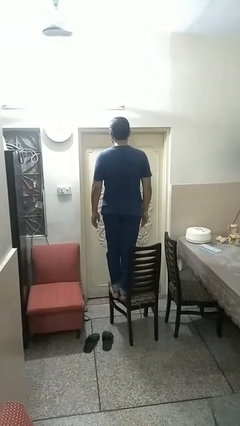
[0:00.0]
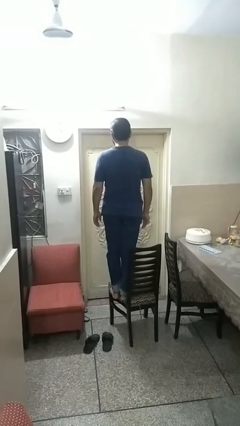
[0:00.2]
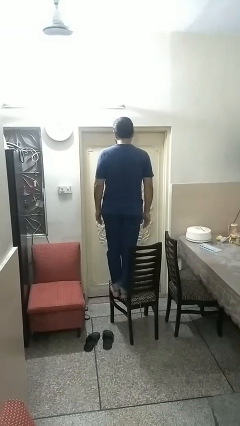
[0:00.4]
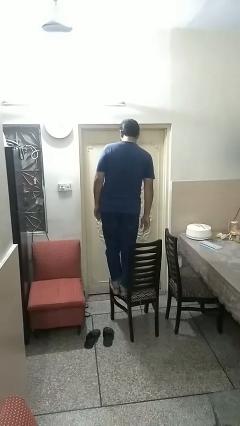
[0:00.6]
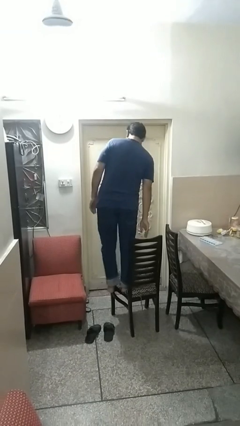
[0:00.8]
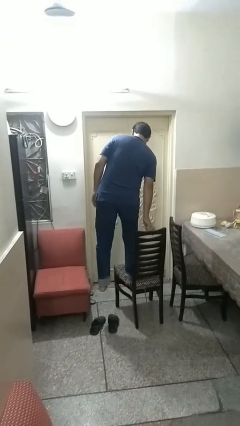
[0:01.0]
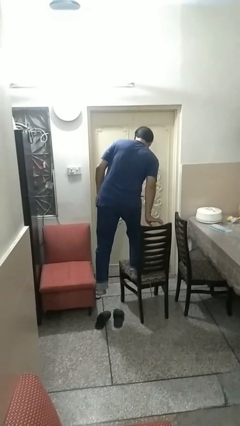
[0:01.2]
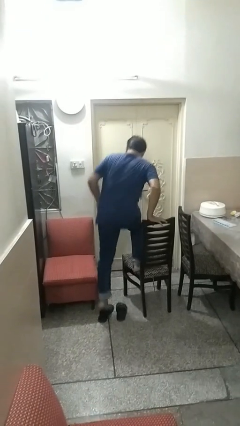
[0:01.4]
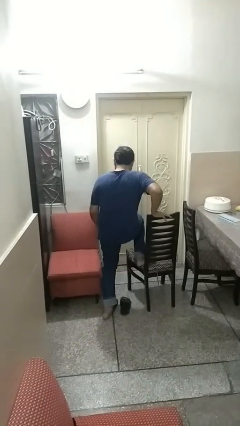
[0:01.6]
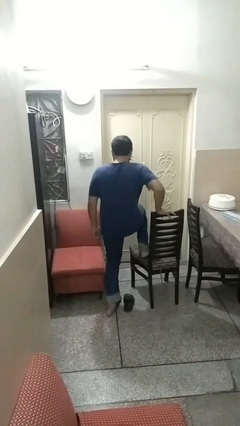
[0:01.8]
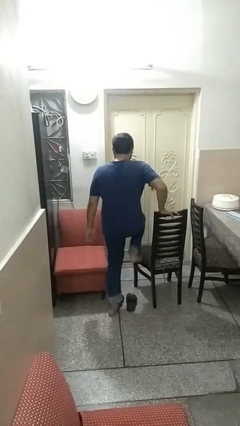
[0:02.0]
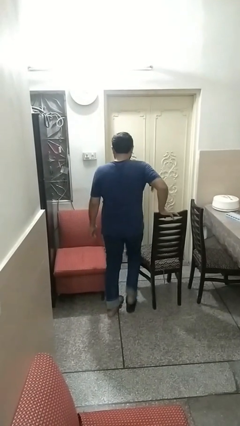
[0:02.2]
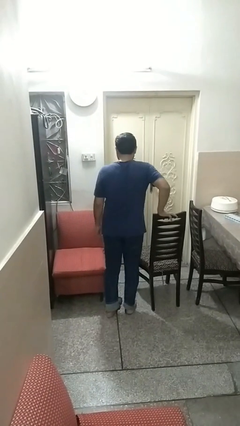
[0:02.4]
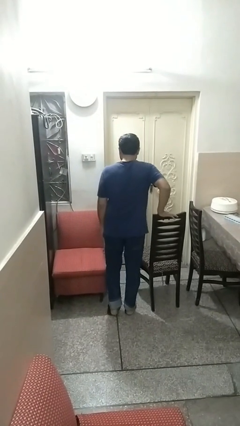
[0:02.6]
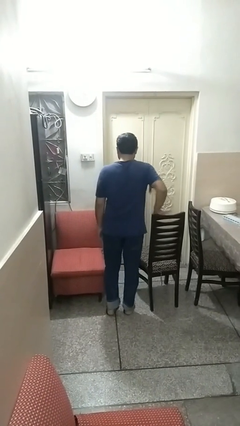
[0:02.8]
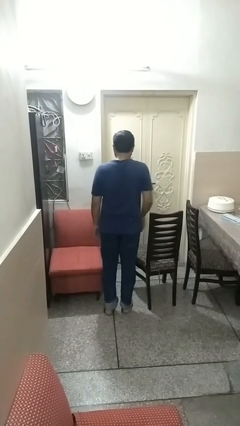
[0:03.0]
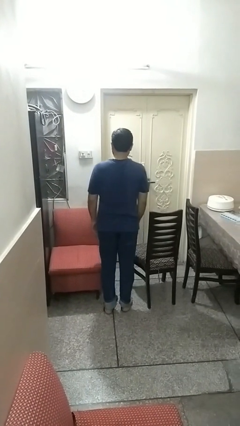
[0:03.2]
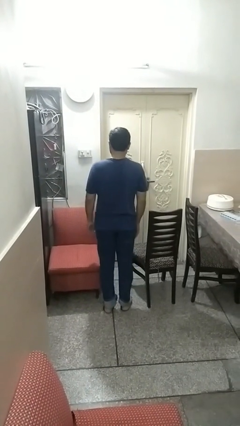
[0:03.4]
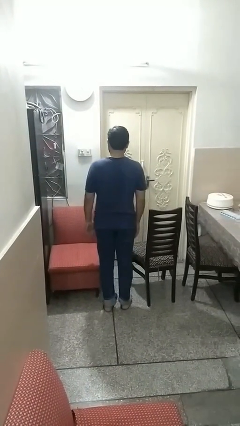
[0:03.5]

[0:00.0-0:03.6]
person climbs off chair

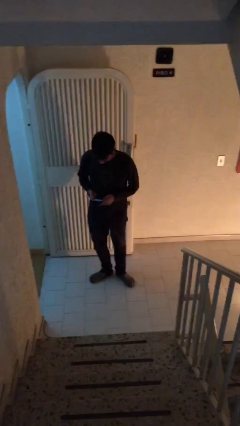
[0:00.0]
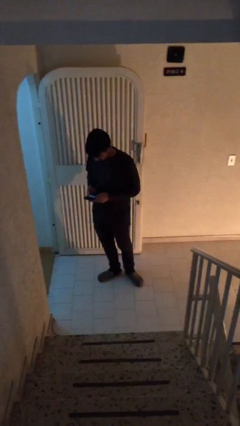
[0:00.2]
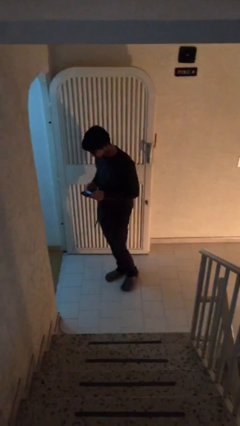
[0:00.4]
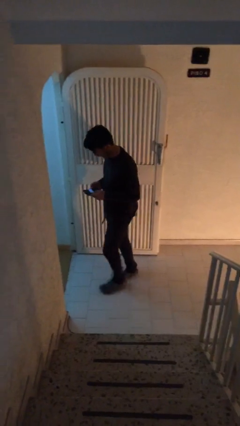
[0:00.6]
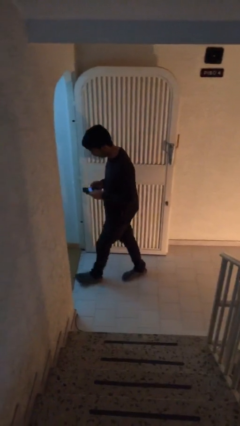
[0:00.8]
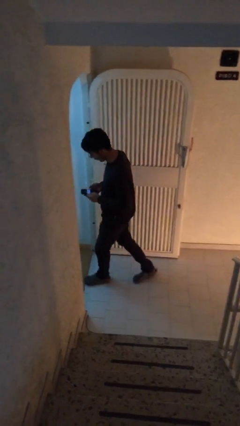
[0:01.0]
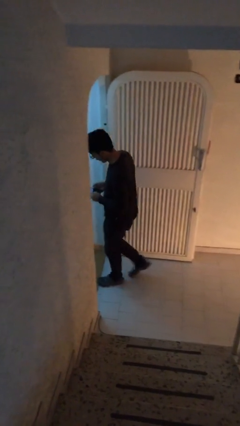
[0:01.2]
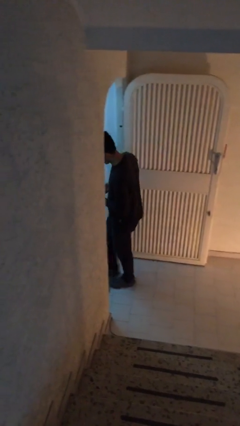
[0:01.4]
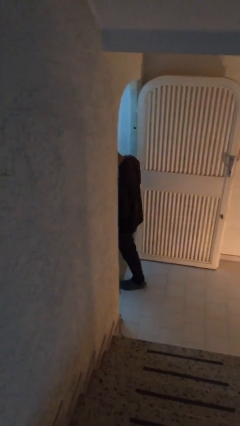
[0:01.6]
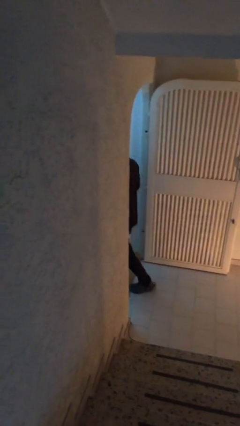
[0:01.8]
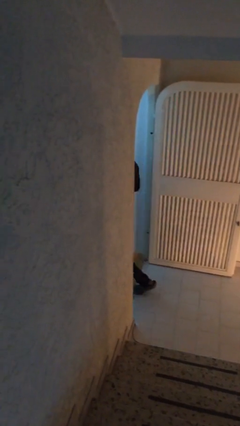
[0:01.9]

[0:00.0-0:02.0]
person exits scene through structure

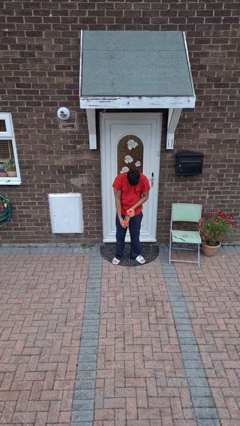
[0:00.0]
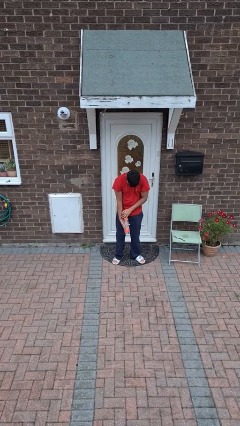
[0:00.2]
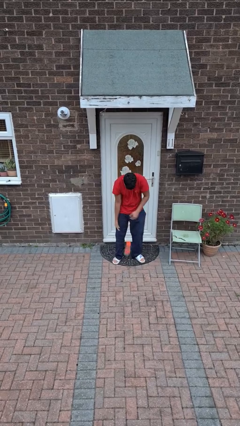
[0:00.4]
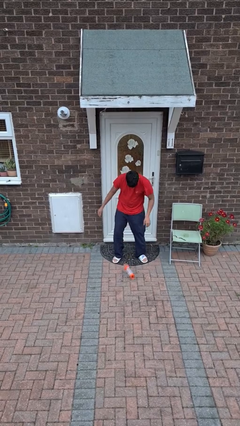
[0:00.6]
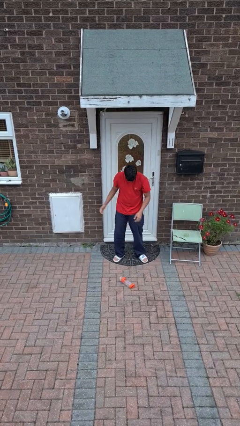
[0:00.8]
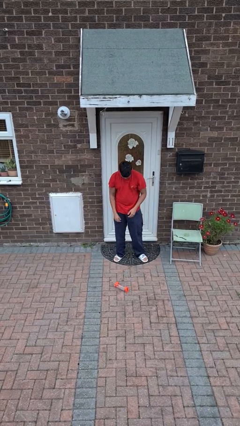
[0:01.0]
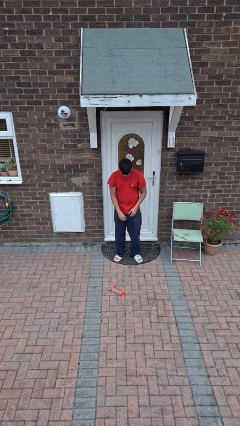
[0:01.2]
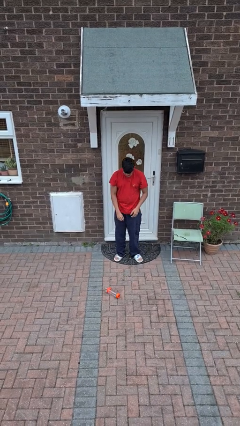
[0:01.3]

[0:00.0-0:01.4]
person drops object

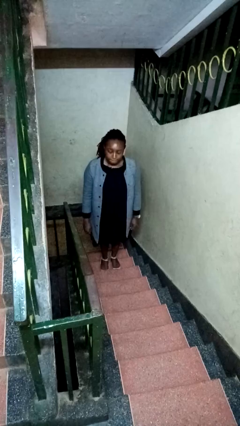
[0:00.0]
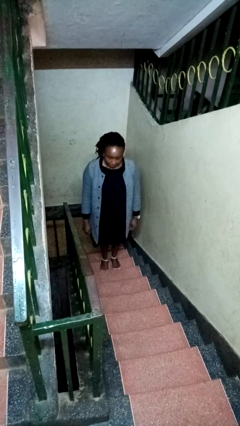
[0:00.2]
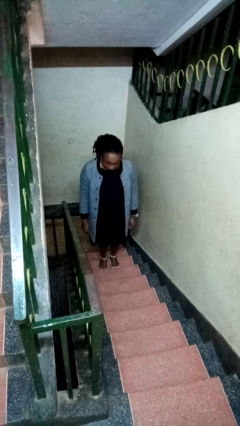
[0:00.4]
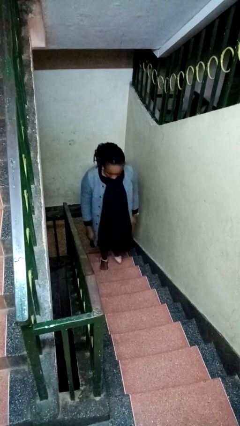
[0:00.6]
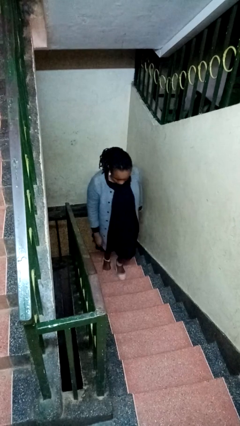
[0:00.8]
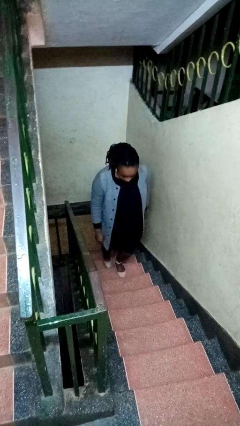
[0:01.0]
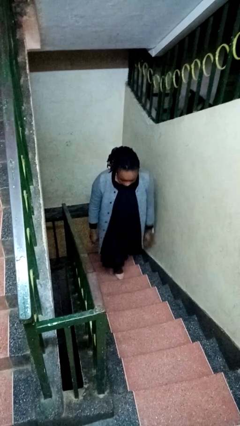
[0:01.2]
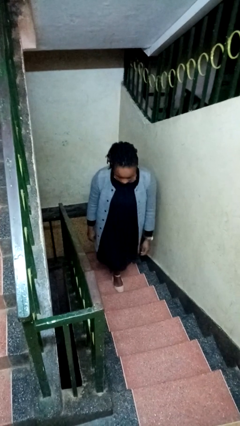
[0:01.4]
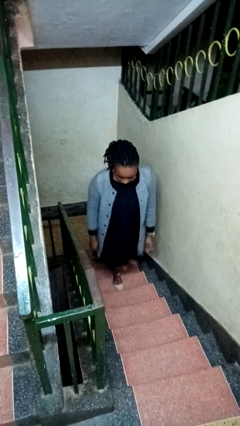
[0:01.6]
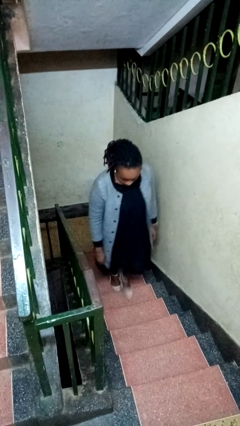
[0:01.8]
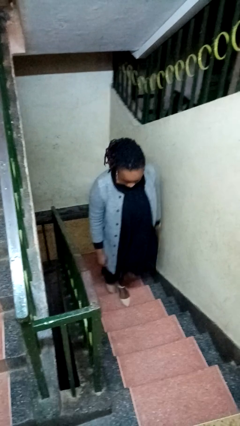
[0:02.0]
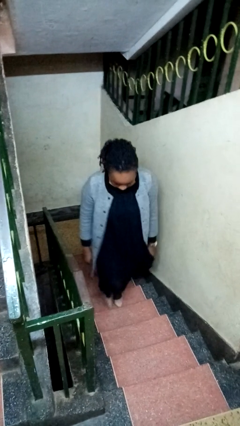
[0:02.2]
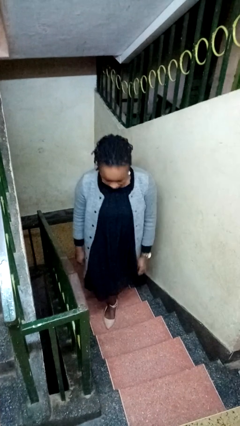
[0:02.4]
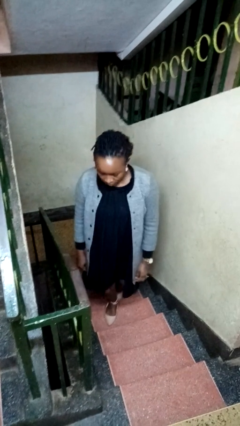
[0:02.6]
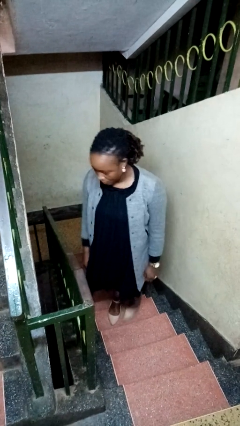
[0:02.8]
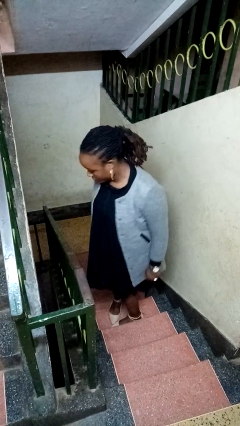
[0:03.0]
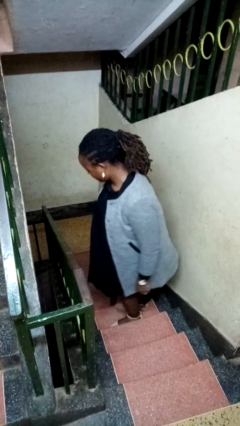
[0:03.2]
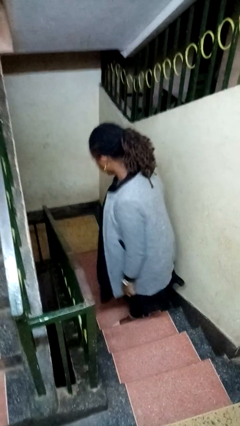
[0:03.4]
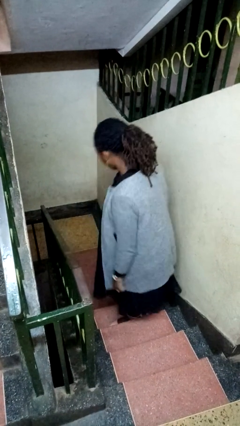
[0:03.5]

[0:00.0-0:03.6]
person climbs up stairs

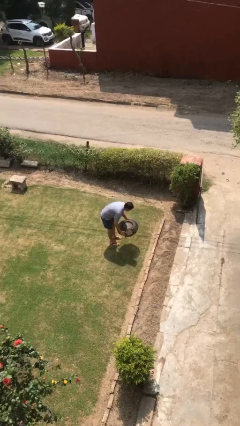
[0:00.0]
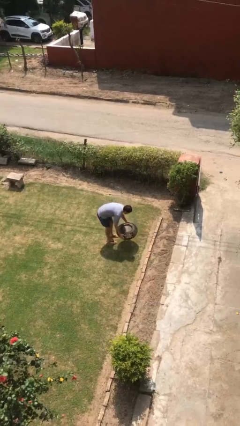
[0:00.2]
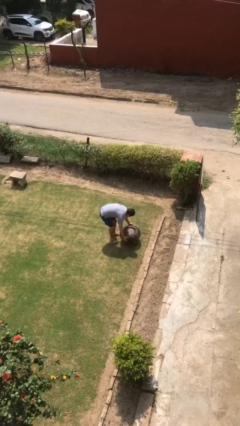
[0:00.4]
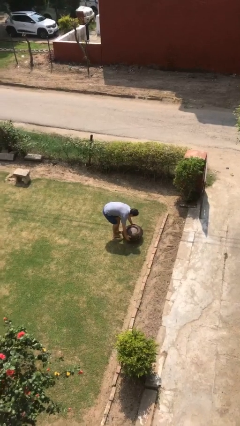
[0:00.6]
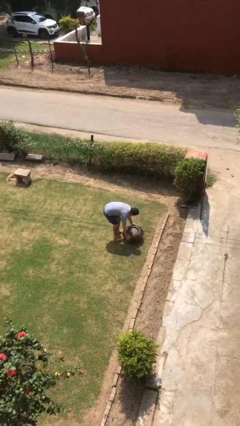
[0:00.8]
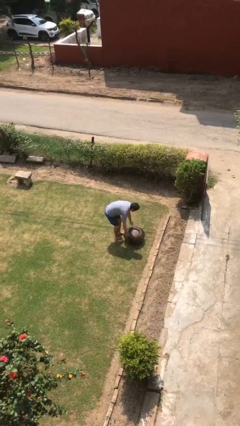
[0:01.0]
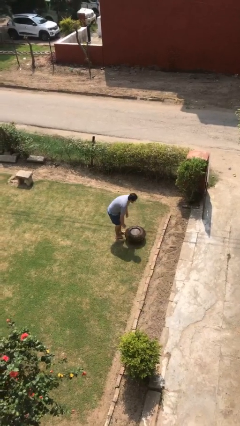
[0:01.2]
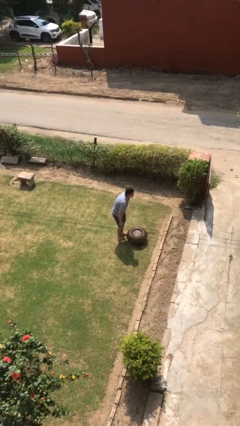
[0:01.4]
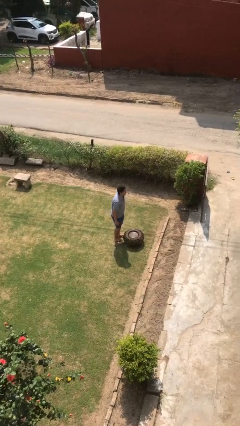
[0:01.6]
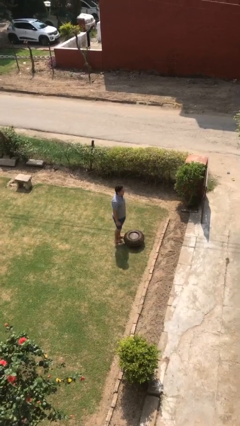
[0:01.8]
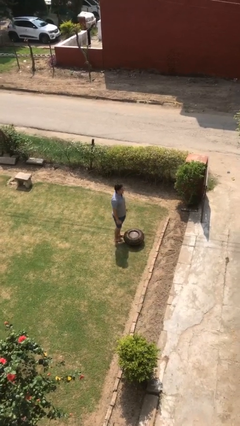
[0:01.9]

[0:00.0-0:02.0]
person puts down object on floor

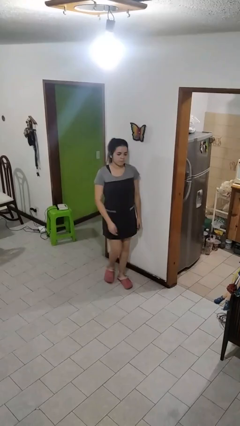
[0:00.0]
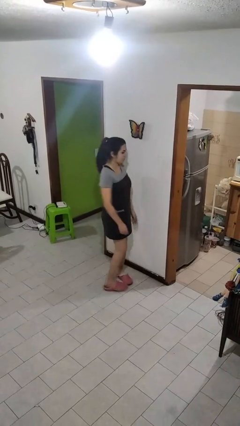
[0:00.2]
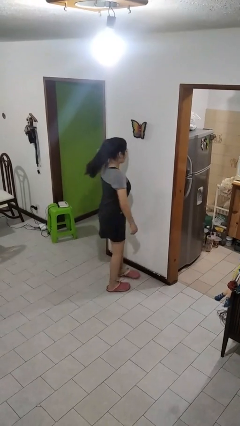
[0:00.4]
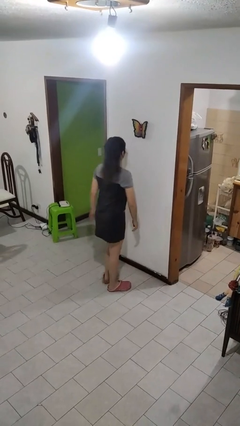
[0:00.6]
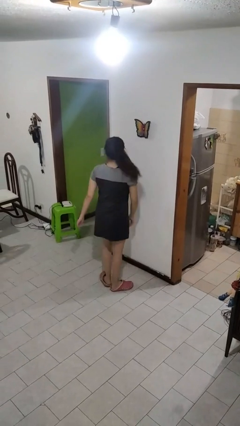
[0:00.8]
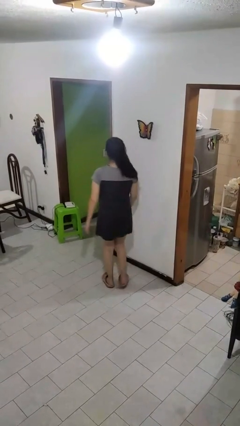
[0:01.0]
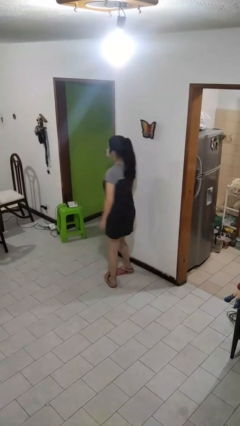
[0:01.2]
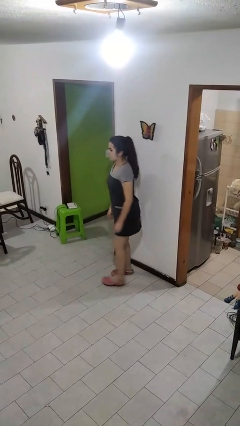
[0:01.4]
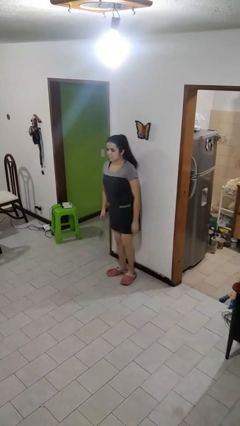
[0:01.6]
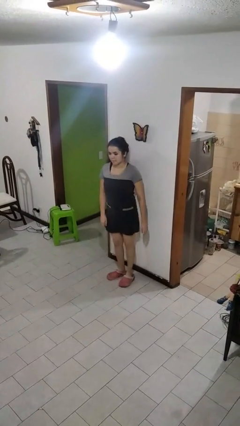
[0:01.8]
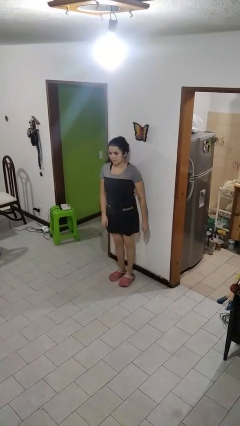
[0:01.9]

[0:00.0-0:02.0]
person twirls

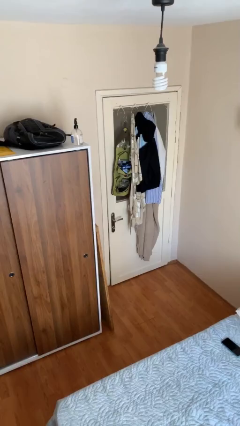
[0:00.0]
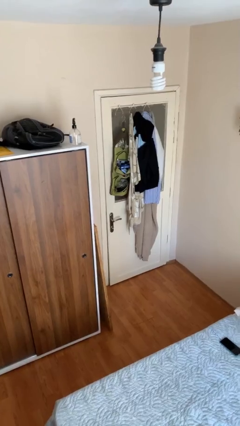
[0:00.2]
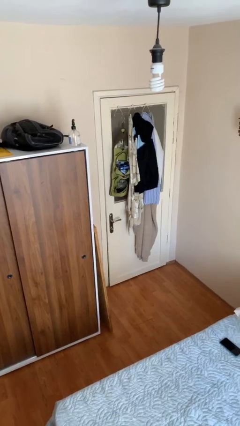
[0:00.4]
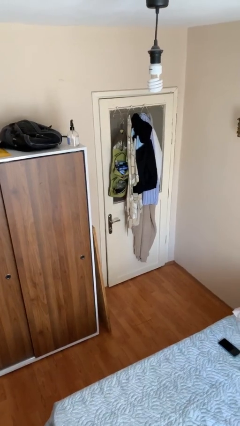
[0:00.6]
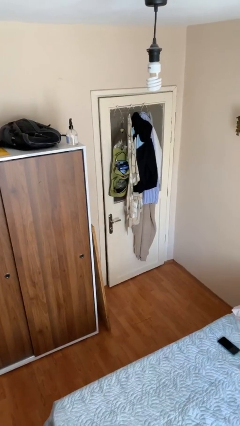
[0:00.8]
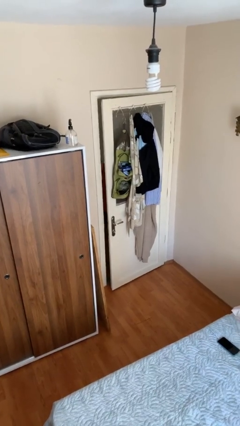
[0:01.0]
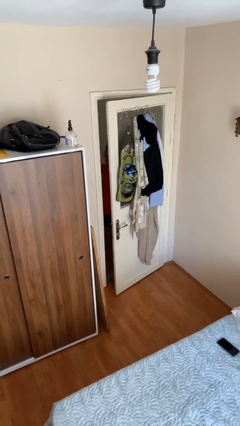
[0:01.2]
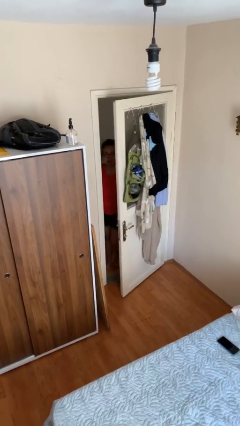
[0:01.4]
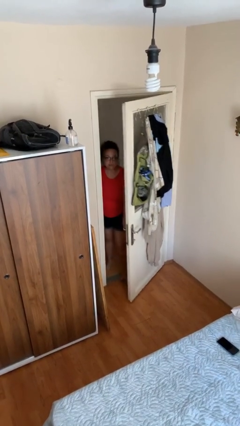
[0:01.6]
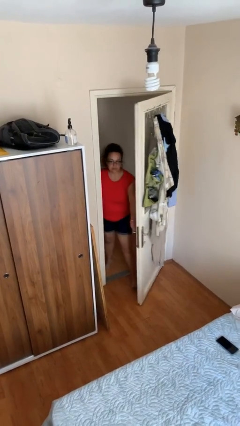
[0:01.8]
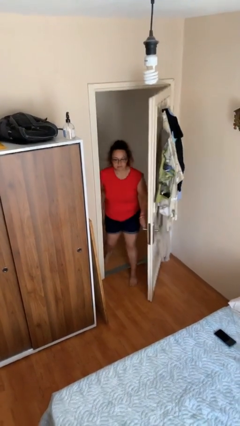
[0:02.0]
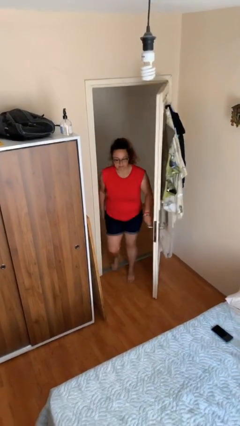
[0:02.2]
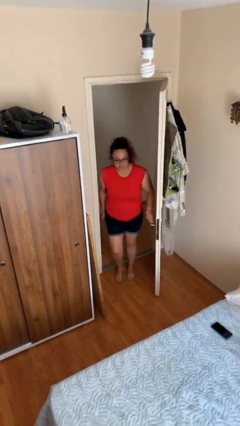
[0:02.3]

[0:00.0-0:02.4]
person opens facility door
